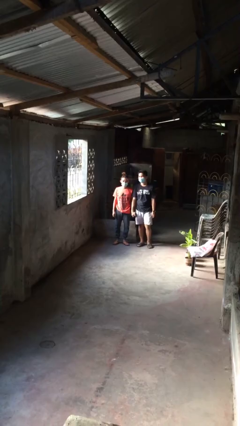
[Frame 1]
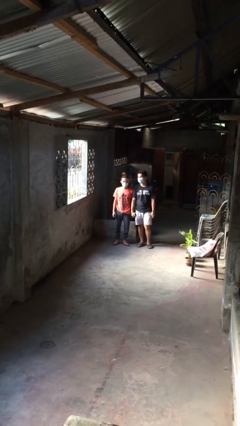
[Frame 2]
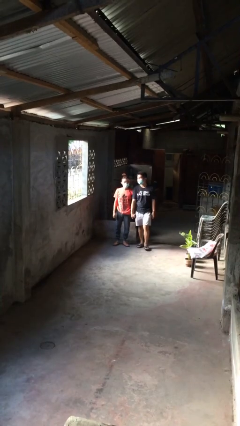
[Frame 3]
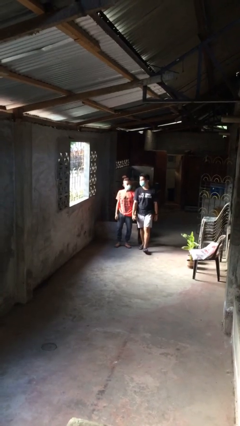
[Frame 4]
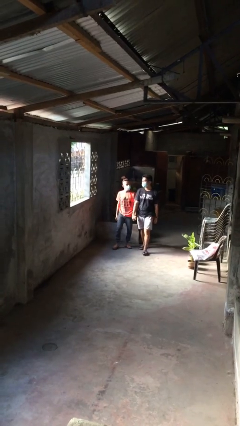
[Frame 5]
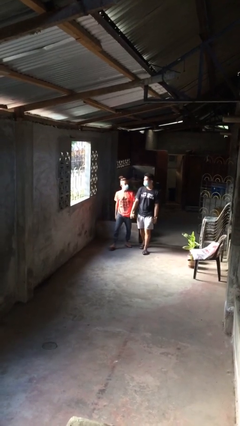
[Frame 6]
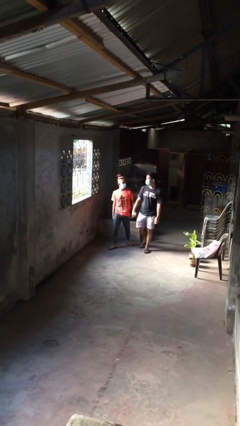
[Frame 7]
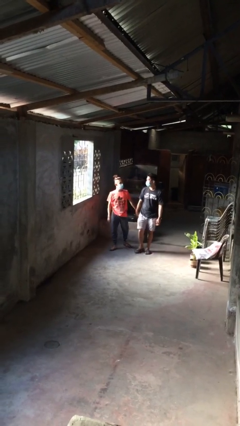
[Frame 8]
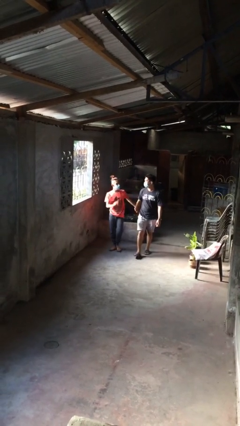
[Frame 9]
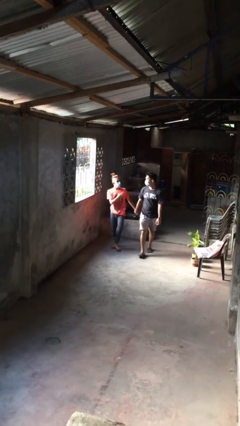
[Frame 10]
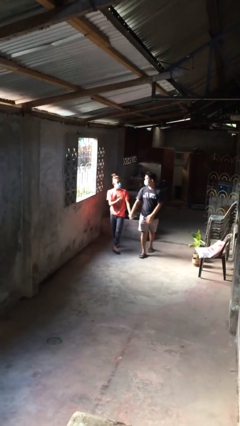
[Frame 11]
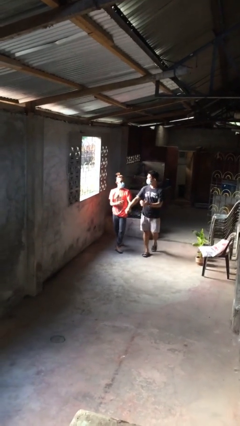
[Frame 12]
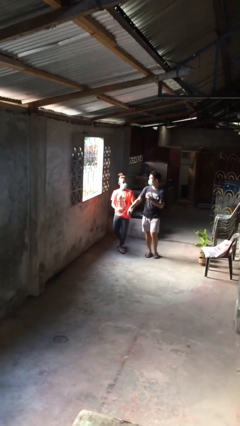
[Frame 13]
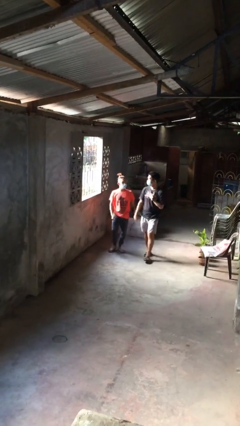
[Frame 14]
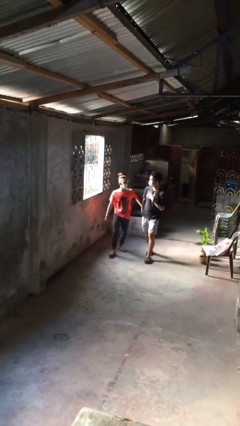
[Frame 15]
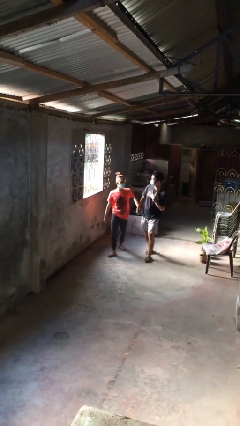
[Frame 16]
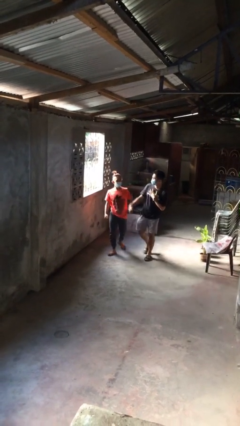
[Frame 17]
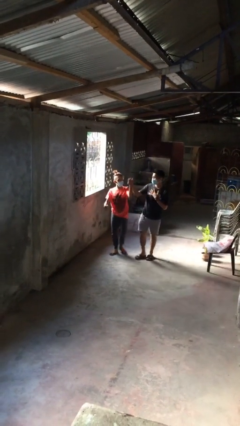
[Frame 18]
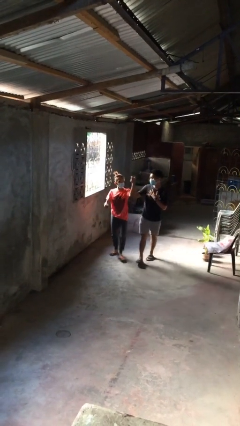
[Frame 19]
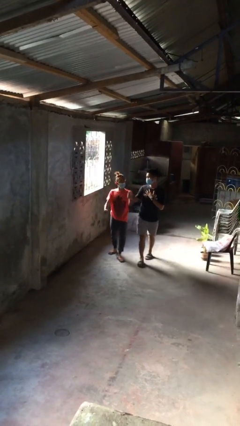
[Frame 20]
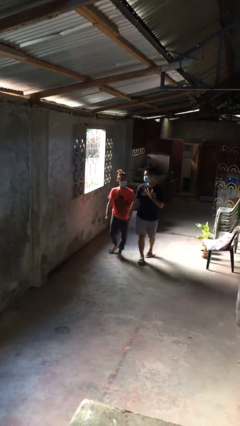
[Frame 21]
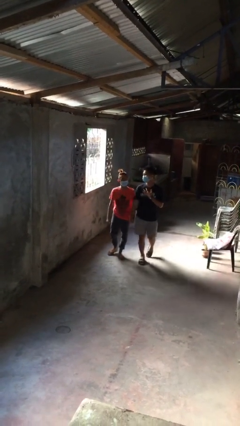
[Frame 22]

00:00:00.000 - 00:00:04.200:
person holds hand

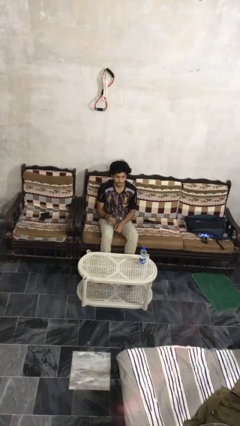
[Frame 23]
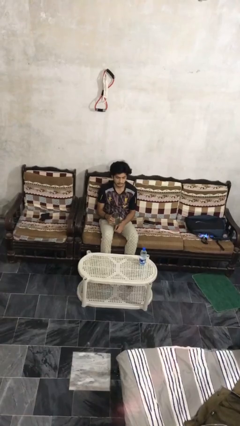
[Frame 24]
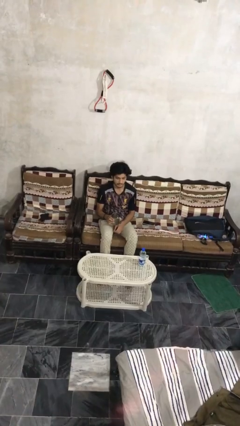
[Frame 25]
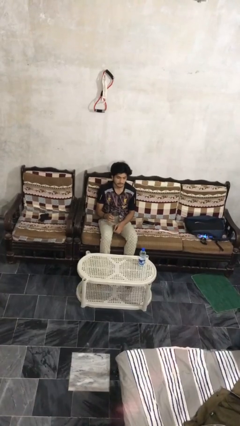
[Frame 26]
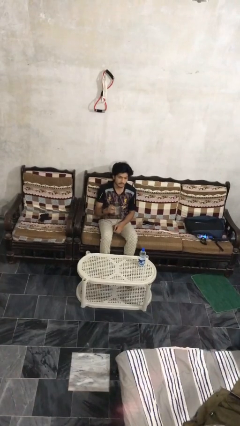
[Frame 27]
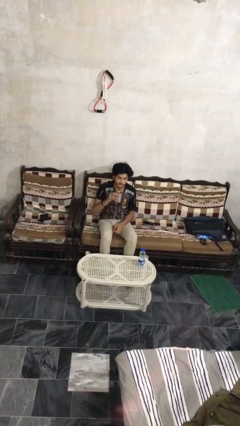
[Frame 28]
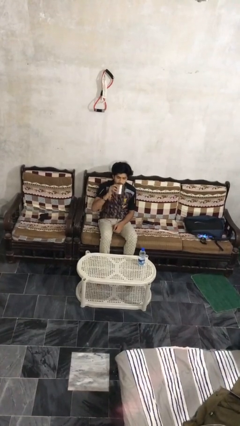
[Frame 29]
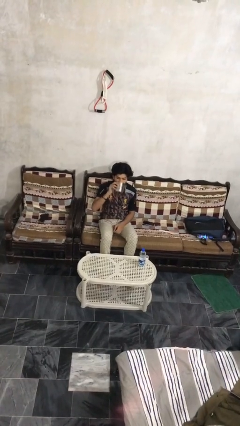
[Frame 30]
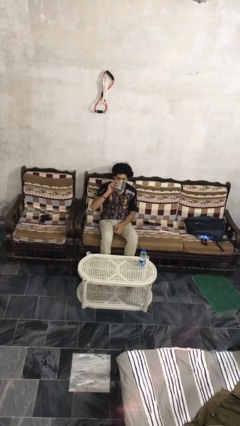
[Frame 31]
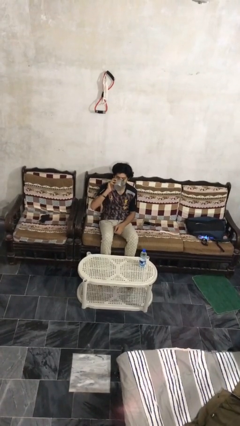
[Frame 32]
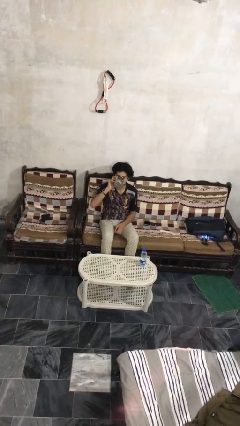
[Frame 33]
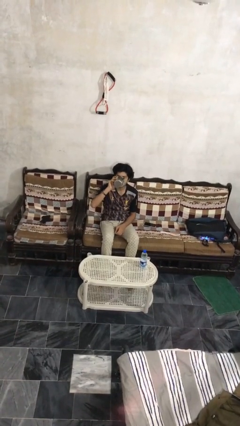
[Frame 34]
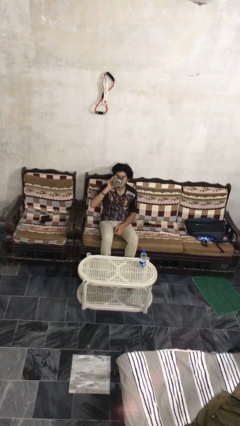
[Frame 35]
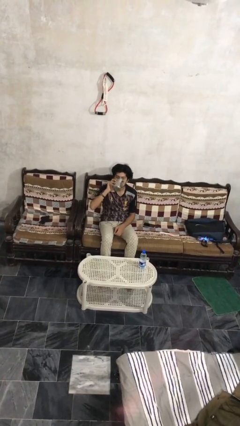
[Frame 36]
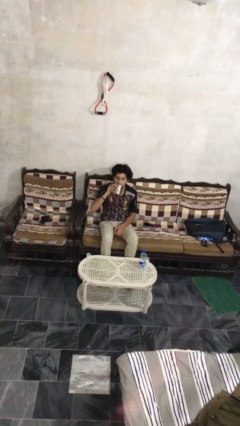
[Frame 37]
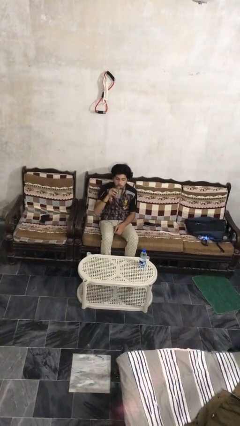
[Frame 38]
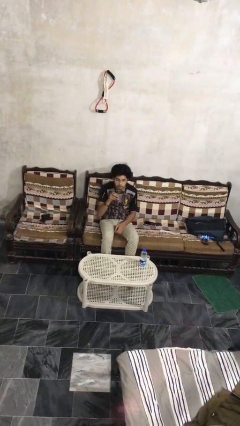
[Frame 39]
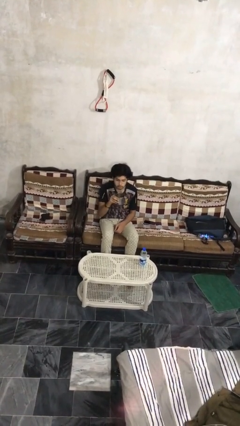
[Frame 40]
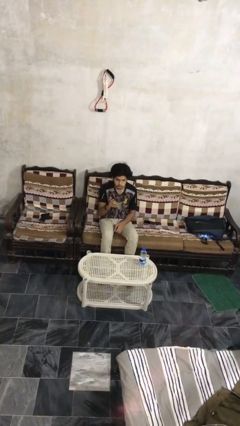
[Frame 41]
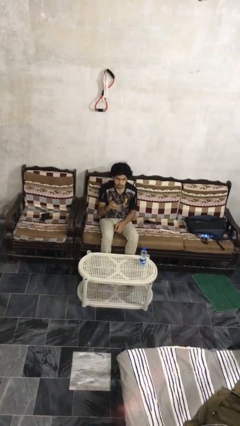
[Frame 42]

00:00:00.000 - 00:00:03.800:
person drinks from mug

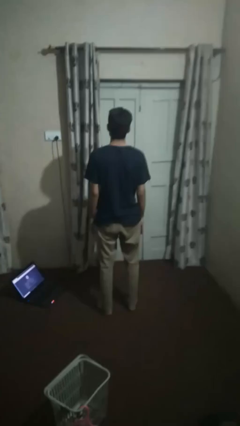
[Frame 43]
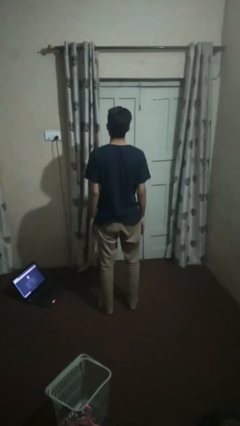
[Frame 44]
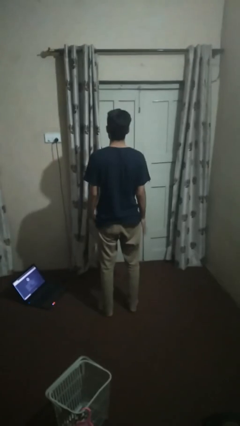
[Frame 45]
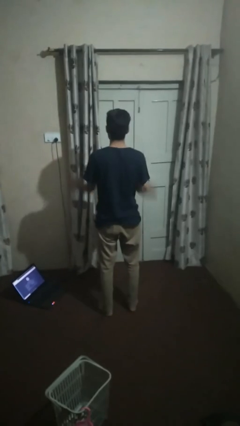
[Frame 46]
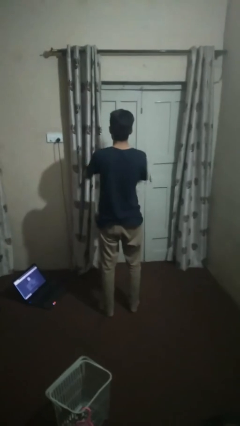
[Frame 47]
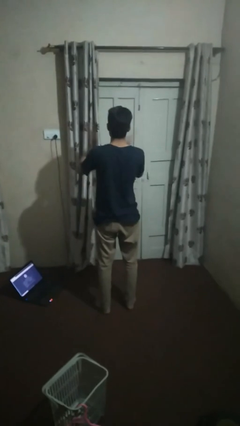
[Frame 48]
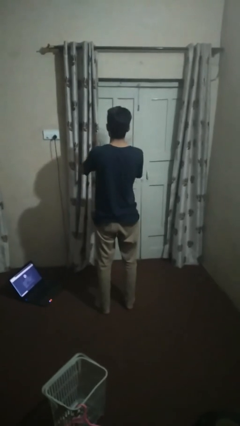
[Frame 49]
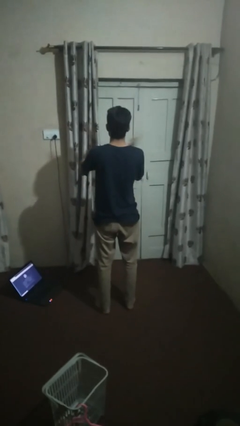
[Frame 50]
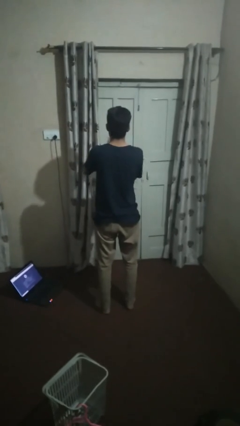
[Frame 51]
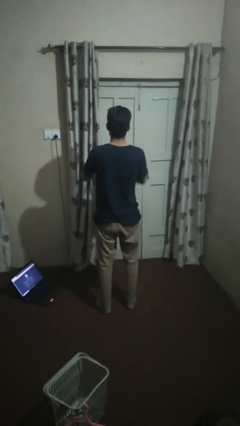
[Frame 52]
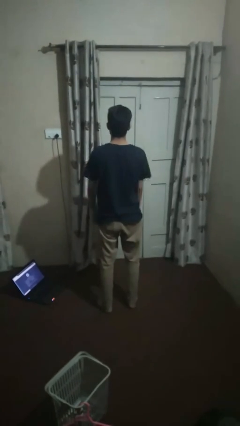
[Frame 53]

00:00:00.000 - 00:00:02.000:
person claps hands

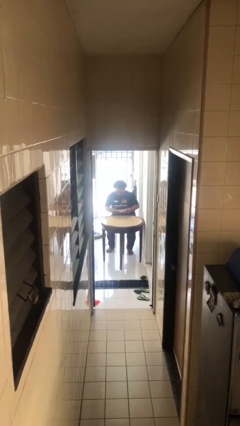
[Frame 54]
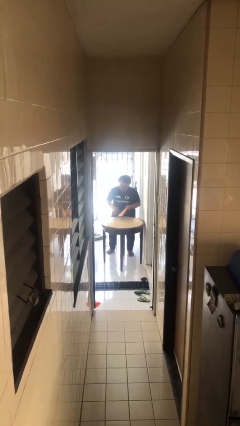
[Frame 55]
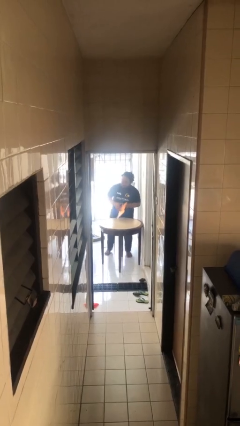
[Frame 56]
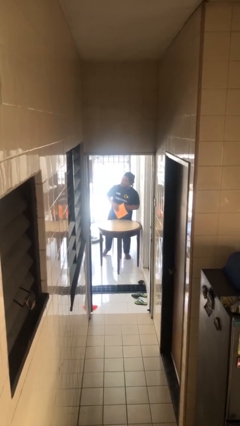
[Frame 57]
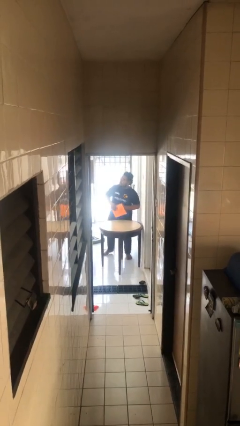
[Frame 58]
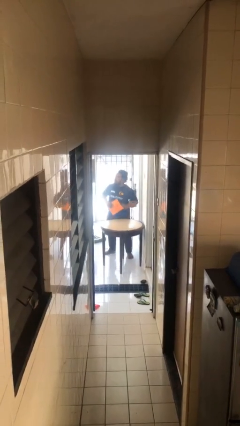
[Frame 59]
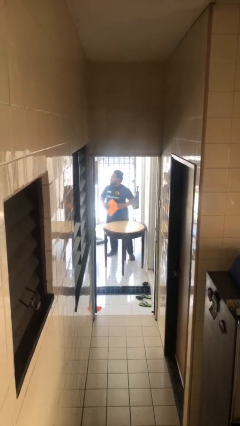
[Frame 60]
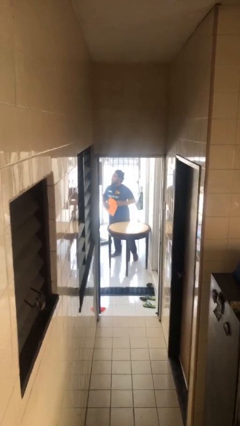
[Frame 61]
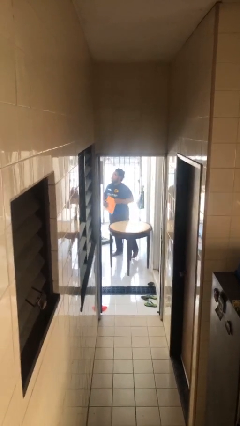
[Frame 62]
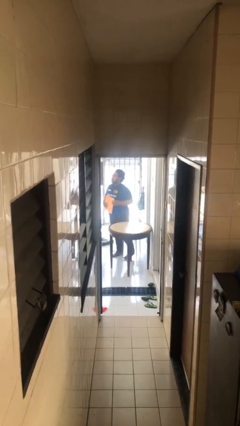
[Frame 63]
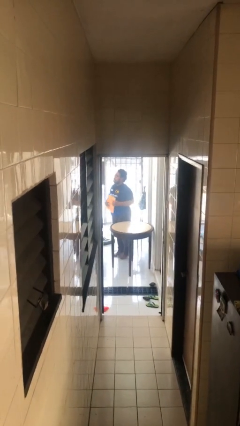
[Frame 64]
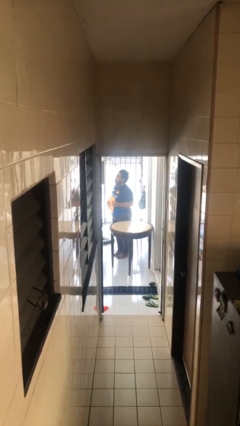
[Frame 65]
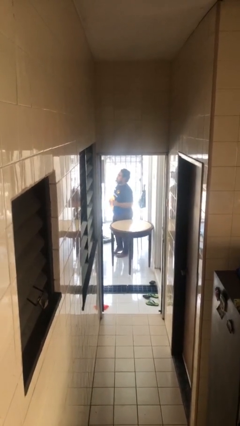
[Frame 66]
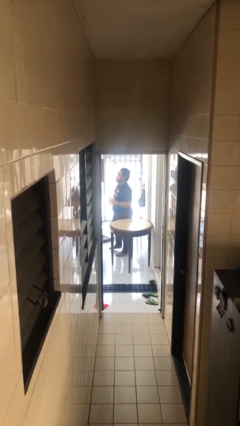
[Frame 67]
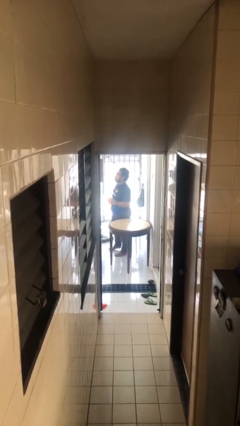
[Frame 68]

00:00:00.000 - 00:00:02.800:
person stands up

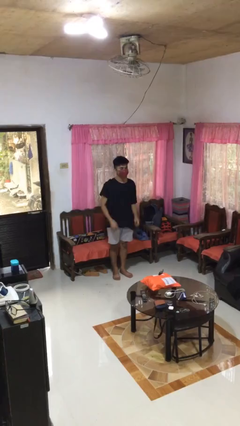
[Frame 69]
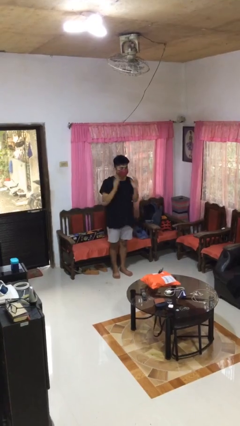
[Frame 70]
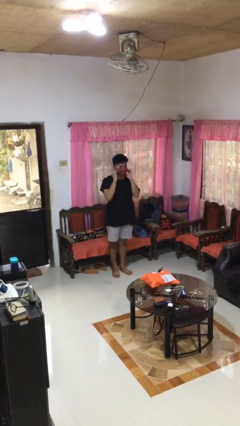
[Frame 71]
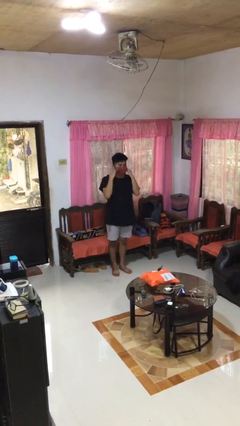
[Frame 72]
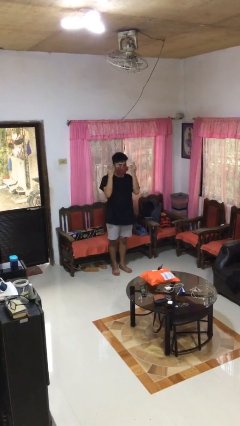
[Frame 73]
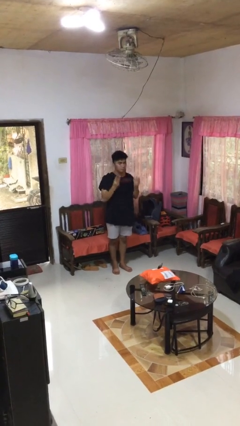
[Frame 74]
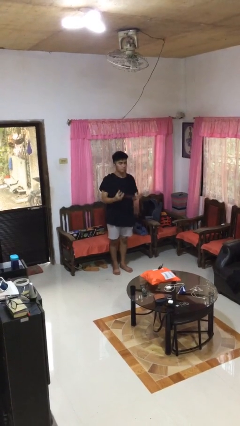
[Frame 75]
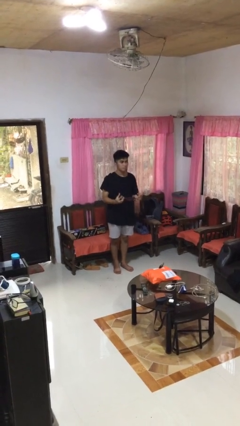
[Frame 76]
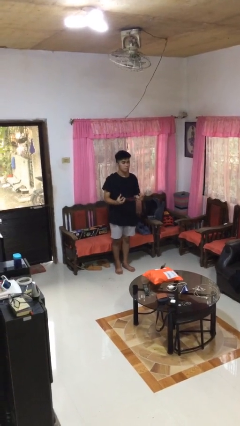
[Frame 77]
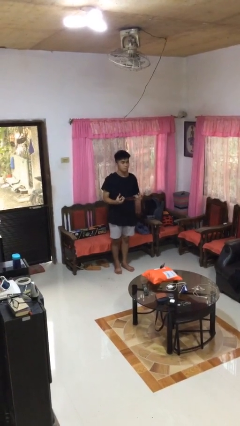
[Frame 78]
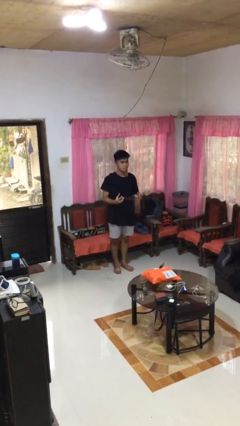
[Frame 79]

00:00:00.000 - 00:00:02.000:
person takes off facemask

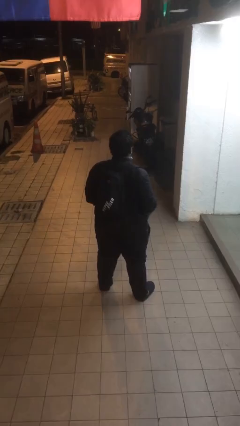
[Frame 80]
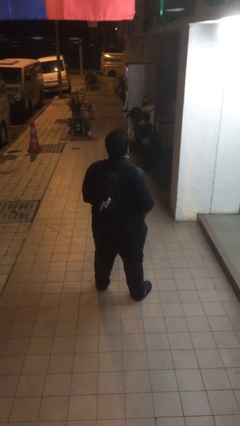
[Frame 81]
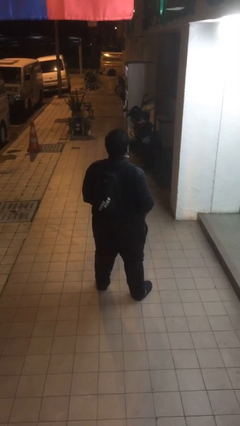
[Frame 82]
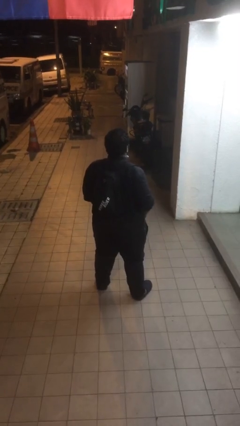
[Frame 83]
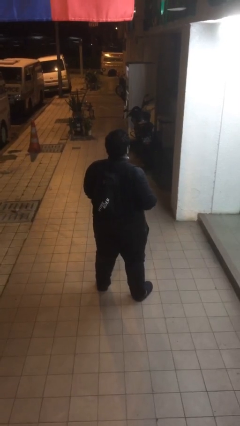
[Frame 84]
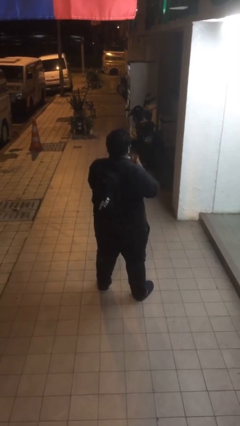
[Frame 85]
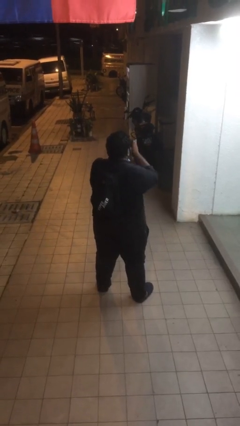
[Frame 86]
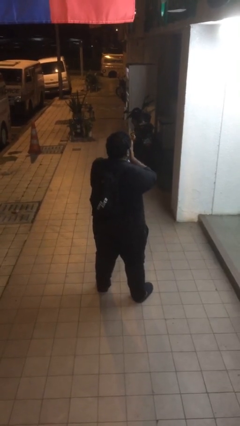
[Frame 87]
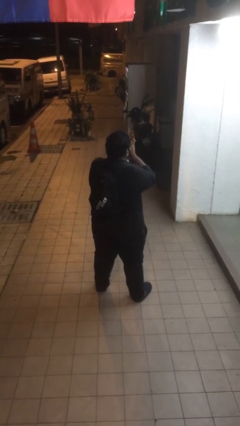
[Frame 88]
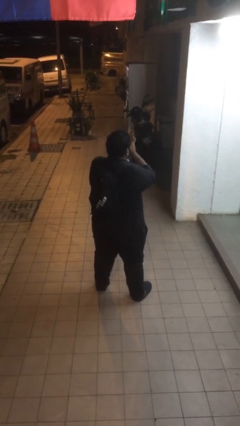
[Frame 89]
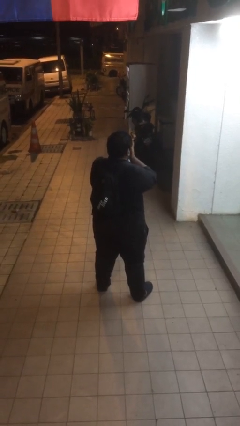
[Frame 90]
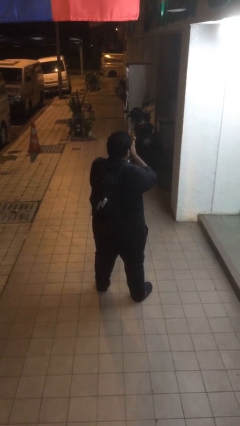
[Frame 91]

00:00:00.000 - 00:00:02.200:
person blows into hands

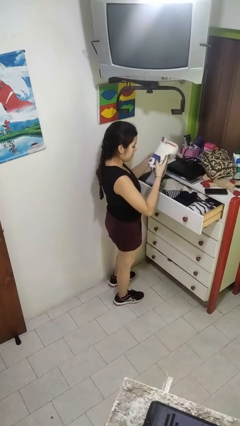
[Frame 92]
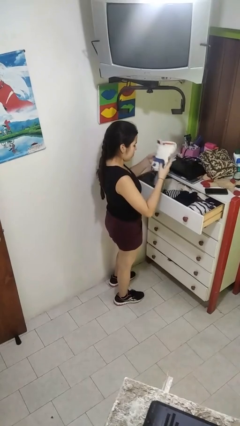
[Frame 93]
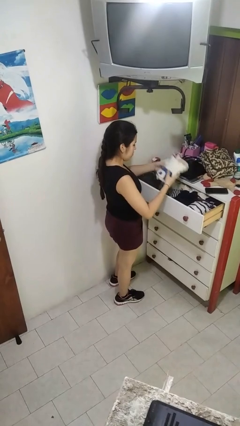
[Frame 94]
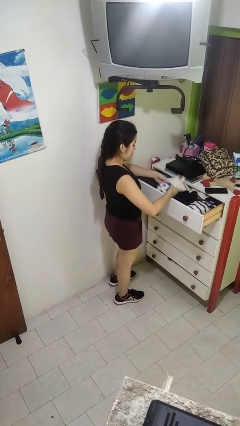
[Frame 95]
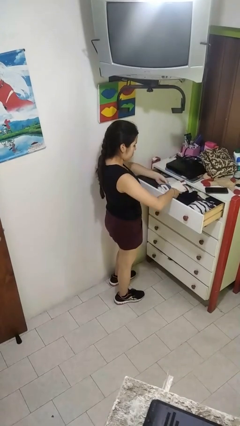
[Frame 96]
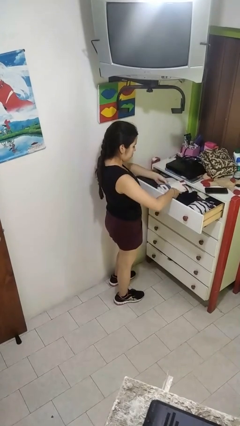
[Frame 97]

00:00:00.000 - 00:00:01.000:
person puts clothes into dresser
